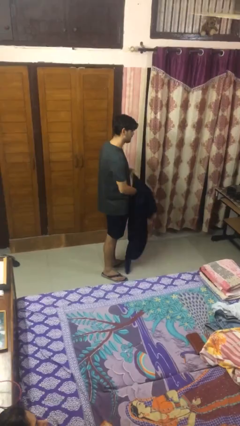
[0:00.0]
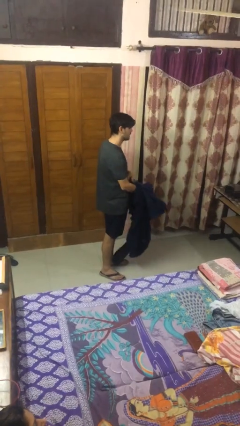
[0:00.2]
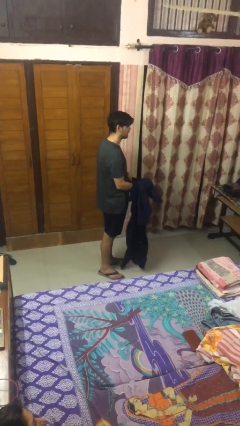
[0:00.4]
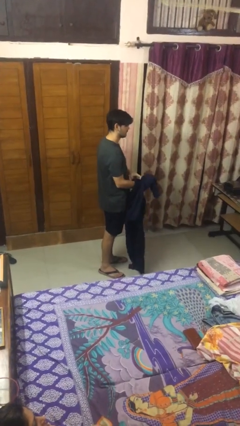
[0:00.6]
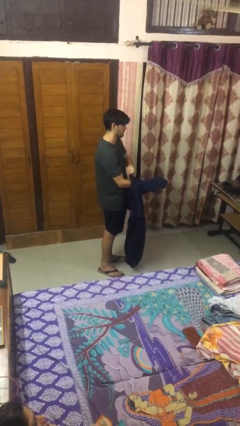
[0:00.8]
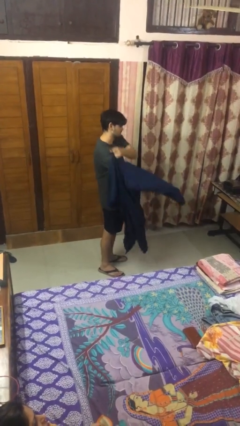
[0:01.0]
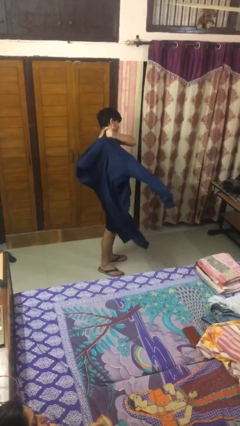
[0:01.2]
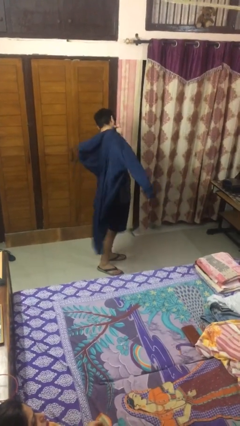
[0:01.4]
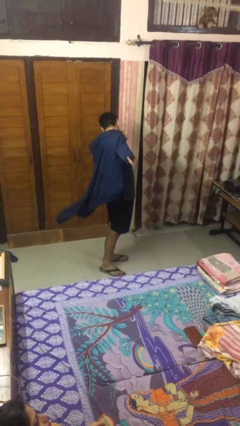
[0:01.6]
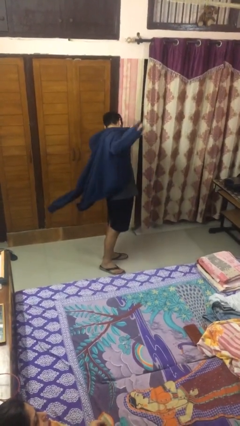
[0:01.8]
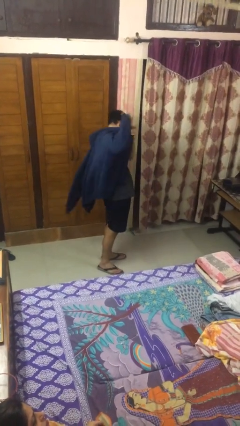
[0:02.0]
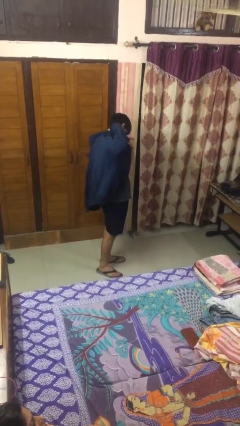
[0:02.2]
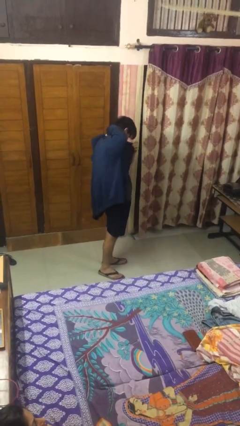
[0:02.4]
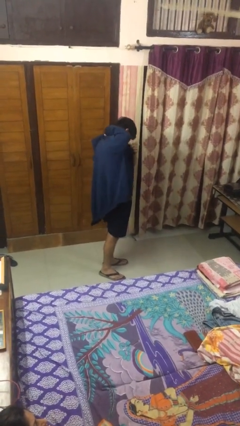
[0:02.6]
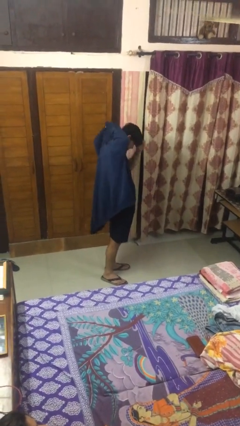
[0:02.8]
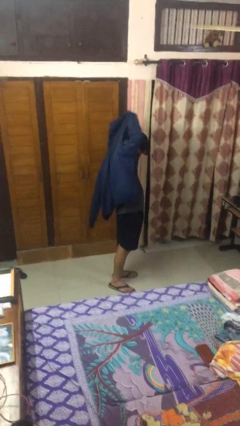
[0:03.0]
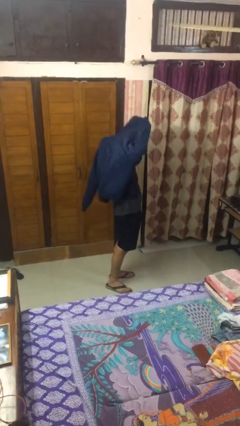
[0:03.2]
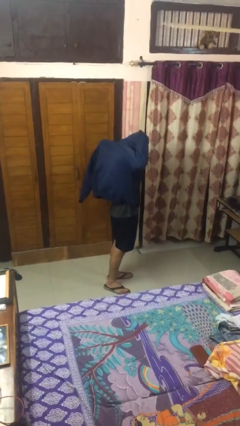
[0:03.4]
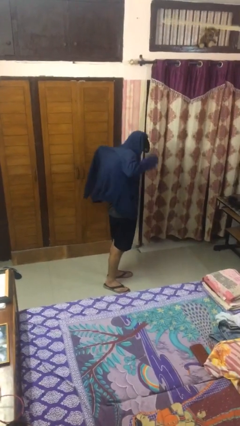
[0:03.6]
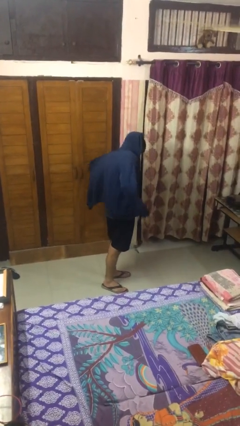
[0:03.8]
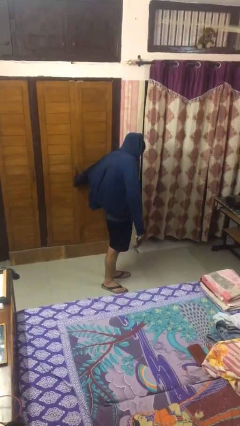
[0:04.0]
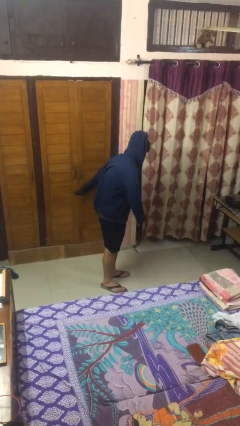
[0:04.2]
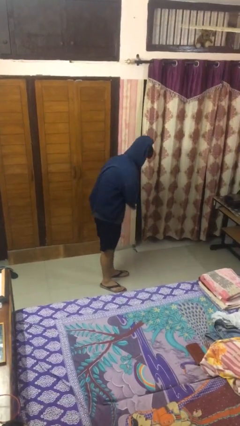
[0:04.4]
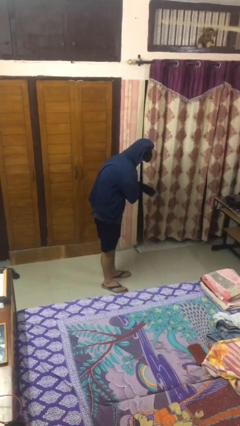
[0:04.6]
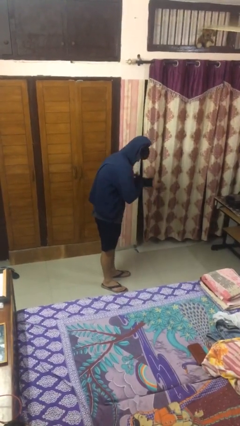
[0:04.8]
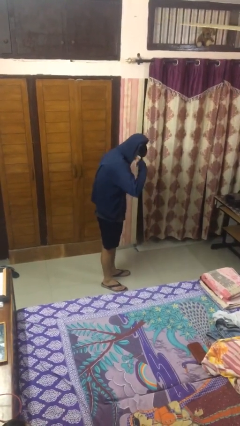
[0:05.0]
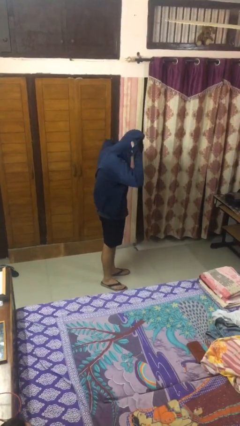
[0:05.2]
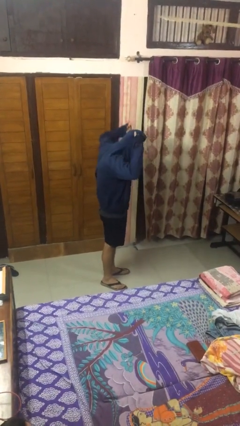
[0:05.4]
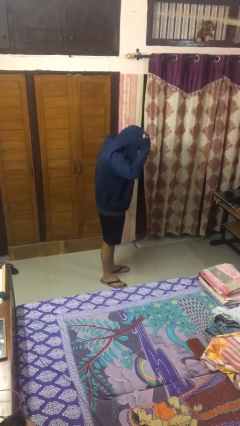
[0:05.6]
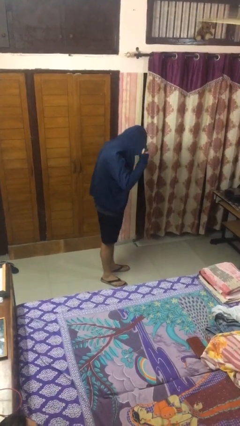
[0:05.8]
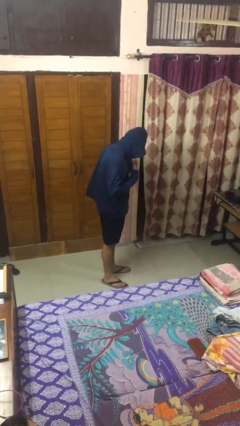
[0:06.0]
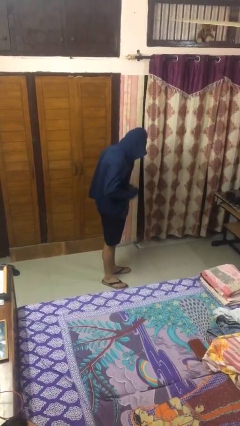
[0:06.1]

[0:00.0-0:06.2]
person puts on hoodie

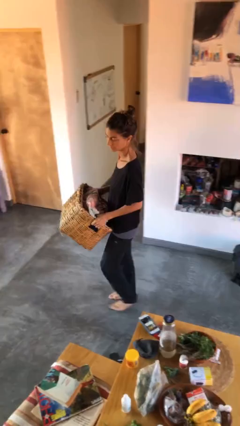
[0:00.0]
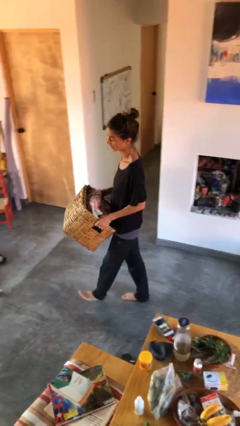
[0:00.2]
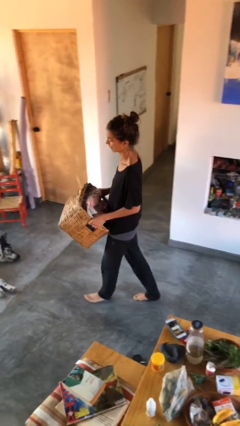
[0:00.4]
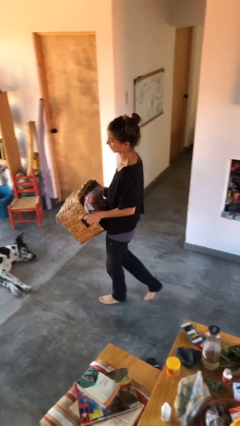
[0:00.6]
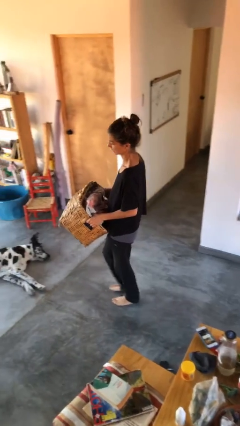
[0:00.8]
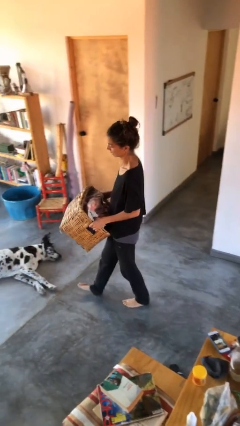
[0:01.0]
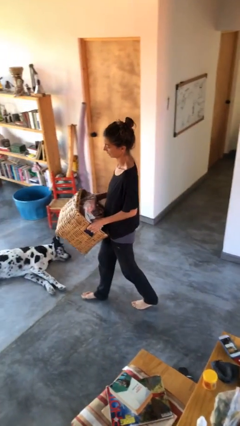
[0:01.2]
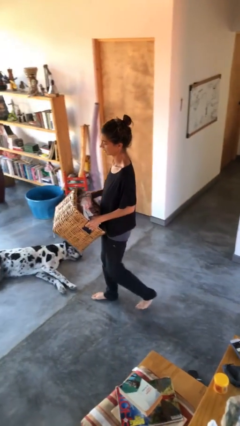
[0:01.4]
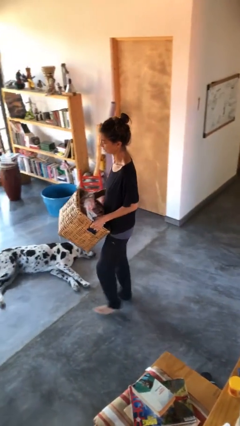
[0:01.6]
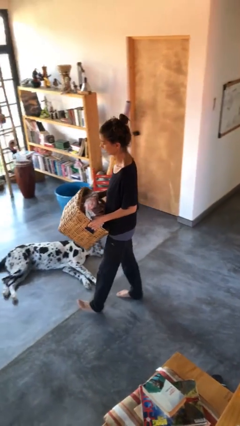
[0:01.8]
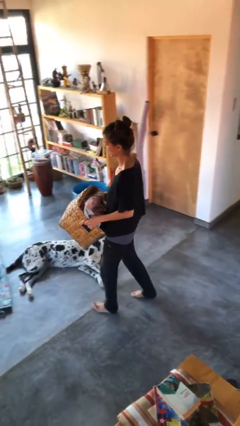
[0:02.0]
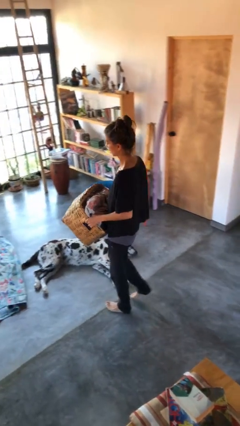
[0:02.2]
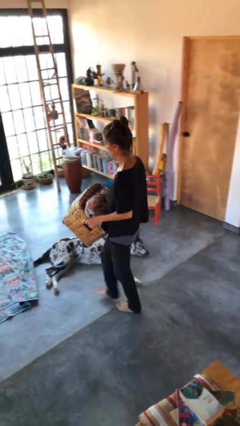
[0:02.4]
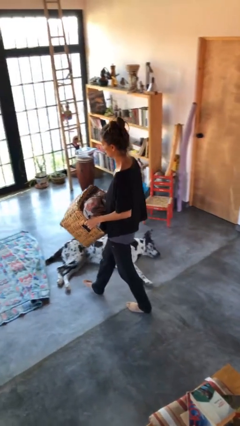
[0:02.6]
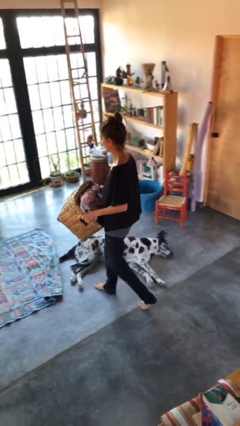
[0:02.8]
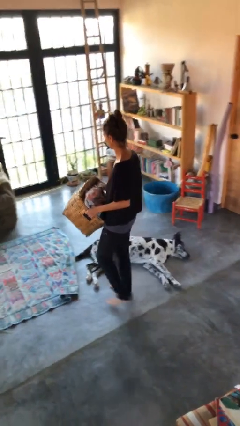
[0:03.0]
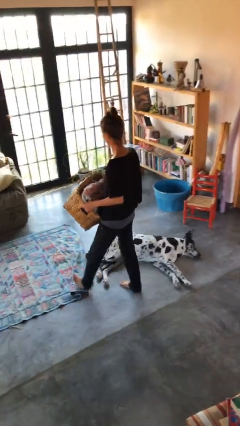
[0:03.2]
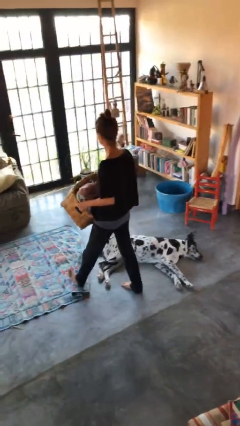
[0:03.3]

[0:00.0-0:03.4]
person carries laundry basket

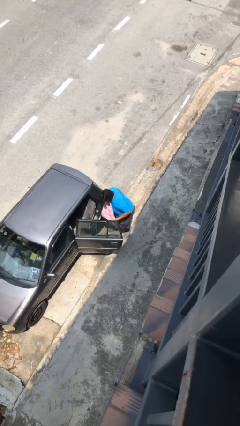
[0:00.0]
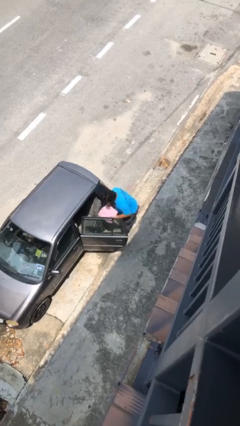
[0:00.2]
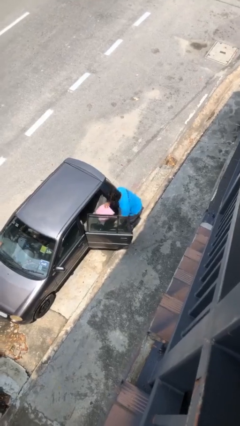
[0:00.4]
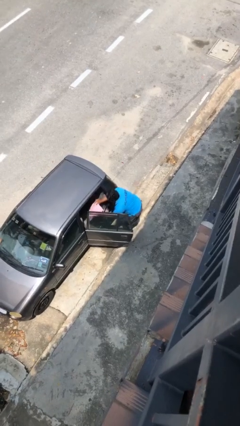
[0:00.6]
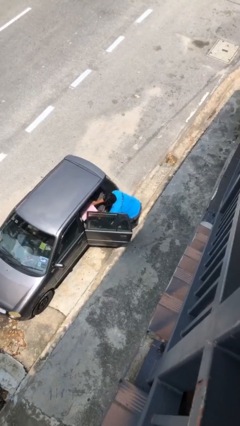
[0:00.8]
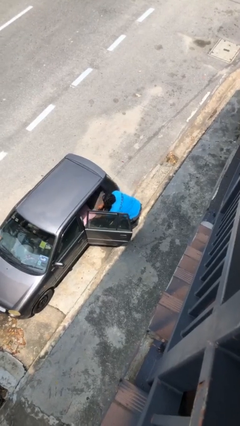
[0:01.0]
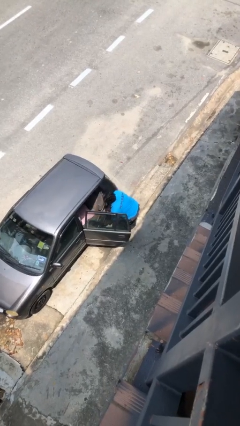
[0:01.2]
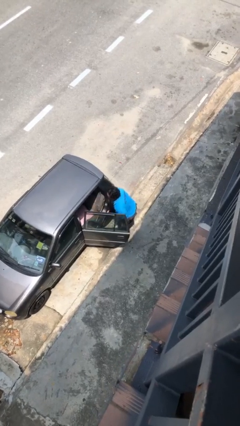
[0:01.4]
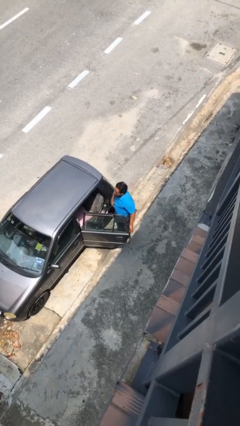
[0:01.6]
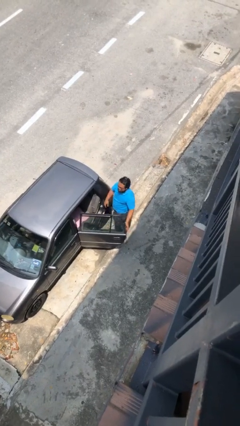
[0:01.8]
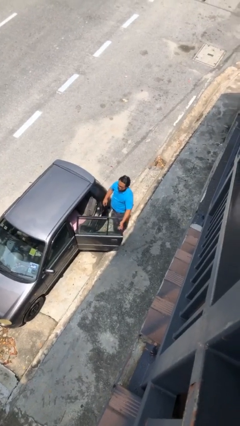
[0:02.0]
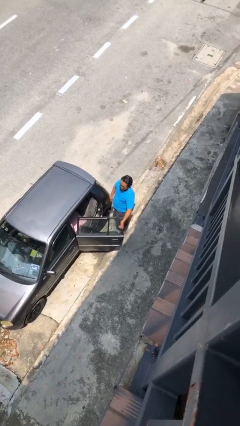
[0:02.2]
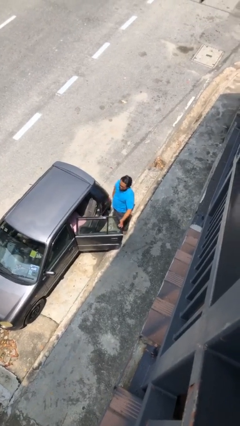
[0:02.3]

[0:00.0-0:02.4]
person loads car

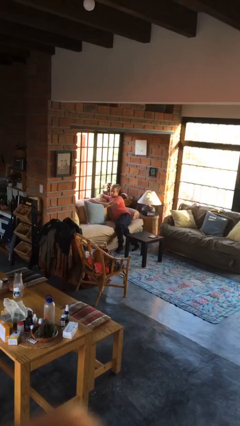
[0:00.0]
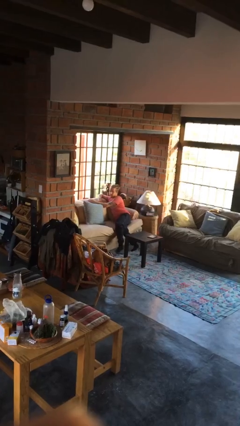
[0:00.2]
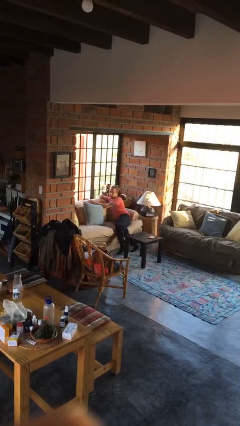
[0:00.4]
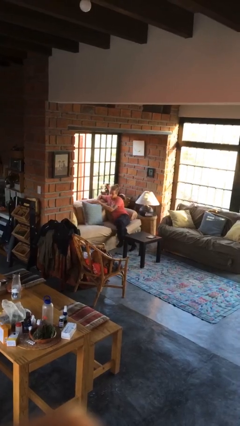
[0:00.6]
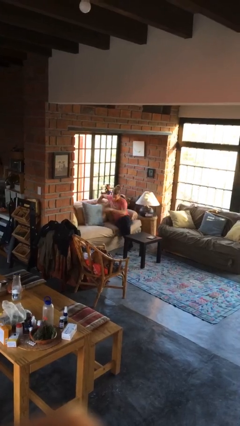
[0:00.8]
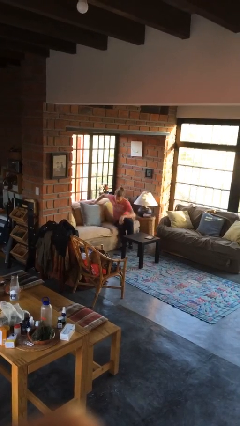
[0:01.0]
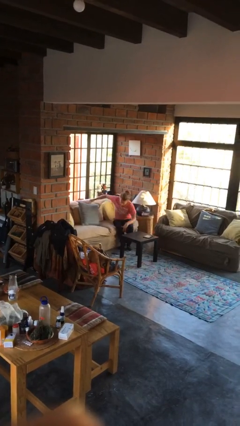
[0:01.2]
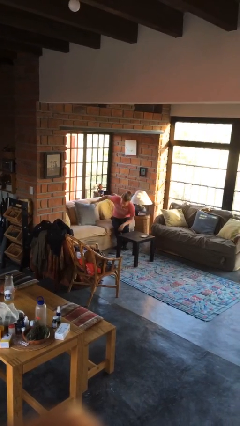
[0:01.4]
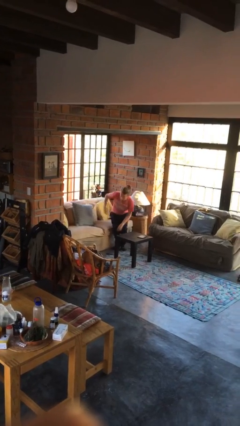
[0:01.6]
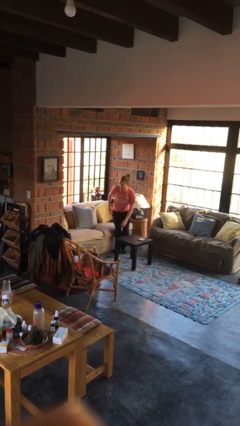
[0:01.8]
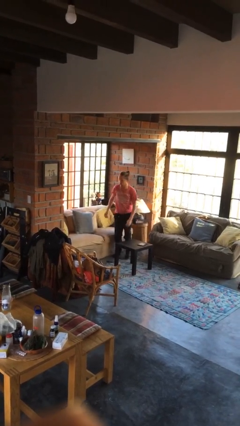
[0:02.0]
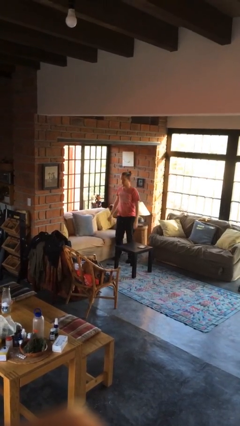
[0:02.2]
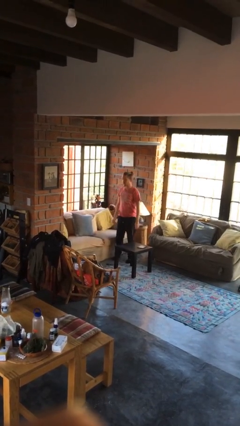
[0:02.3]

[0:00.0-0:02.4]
person stands up

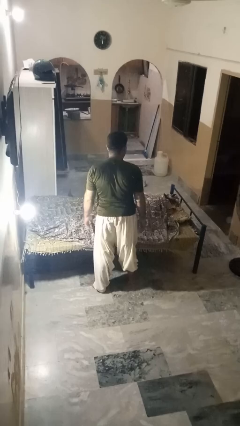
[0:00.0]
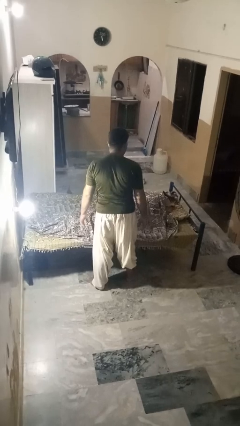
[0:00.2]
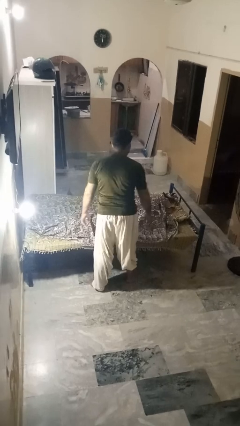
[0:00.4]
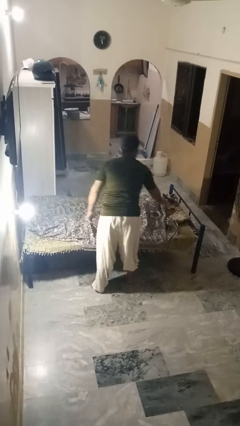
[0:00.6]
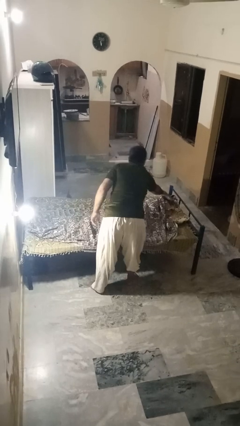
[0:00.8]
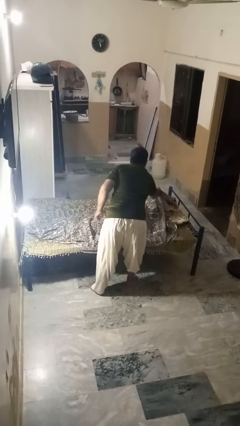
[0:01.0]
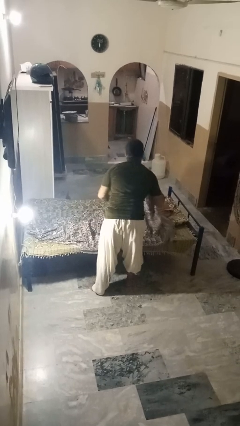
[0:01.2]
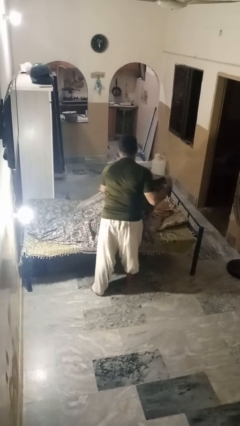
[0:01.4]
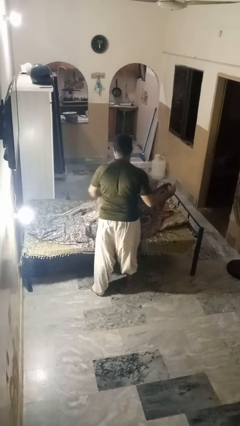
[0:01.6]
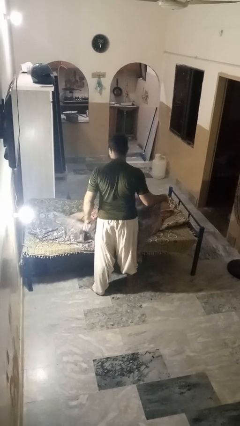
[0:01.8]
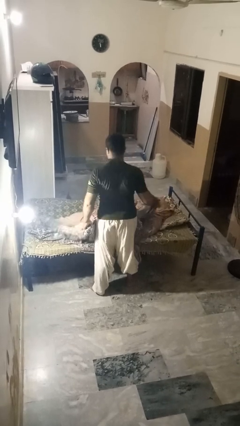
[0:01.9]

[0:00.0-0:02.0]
person uncovers friend with blanket

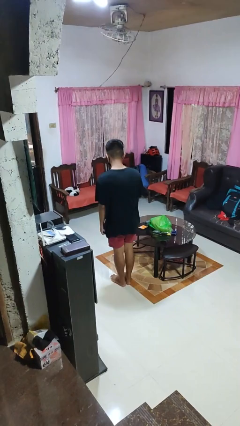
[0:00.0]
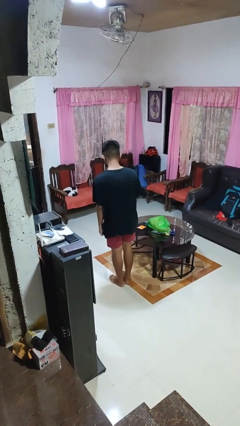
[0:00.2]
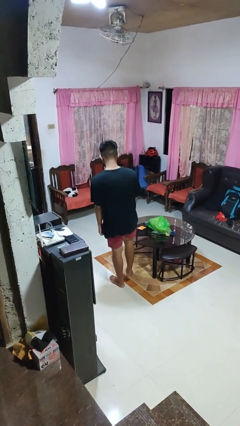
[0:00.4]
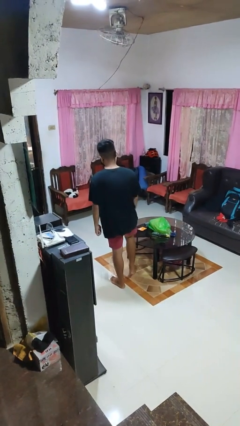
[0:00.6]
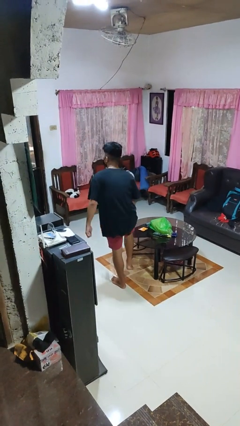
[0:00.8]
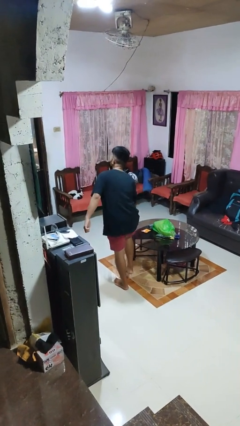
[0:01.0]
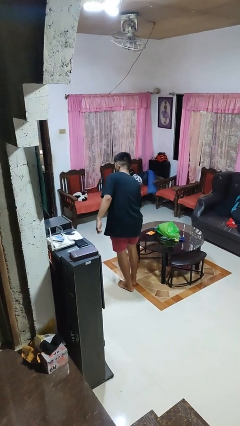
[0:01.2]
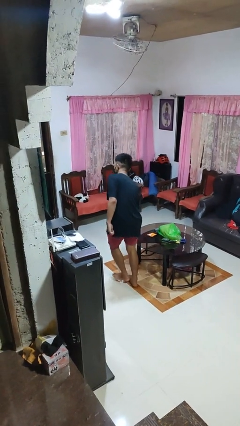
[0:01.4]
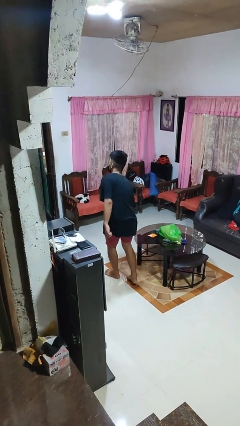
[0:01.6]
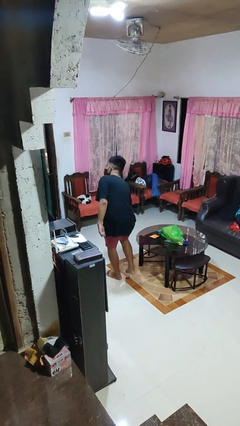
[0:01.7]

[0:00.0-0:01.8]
person bumps into table
